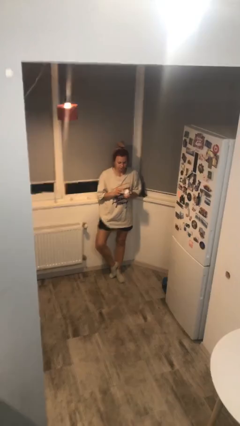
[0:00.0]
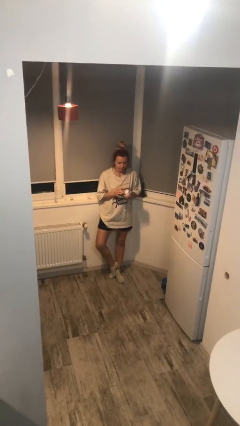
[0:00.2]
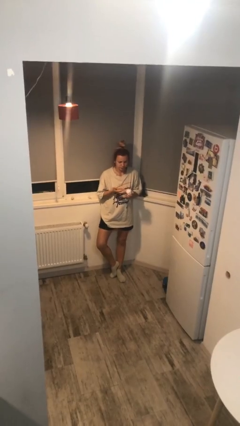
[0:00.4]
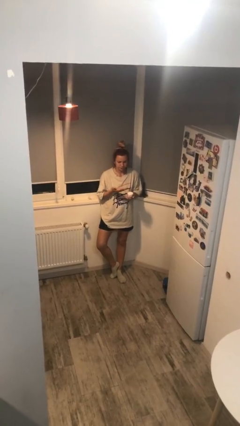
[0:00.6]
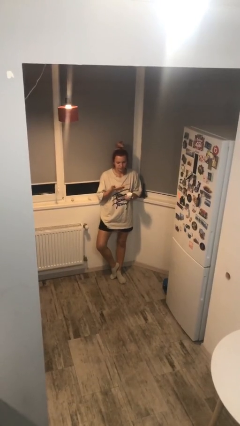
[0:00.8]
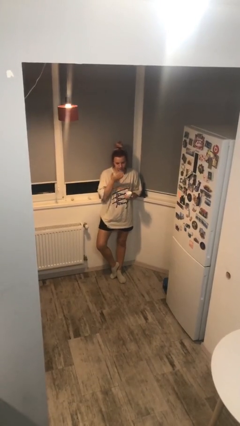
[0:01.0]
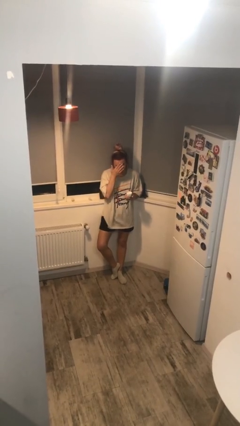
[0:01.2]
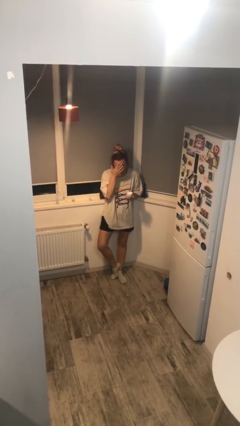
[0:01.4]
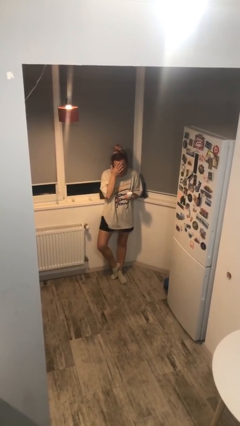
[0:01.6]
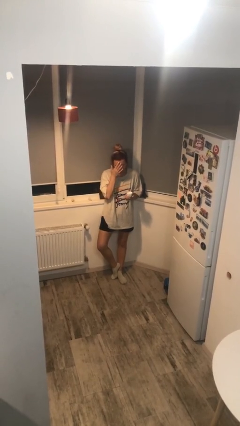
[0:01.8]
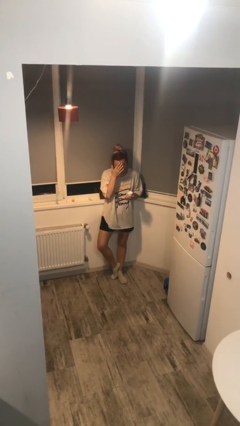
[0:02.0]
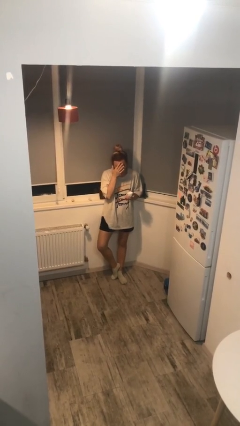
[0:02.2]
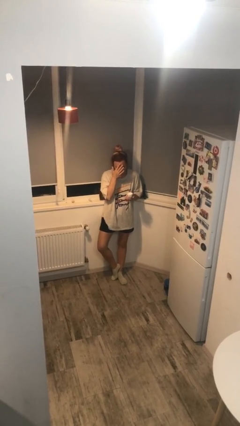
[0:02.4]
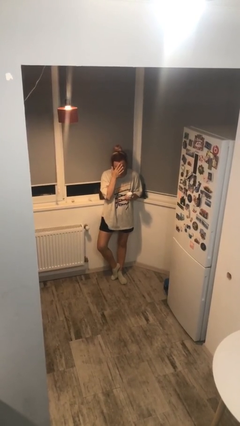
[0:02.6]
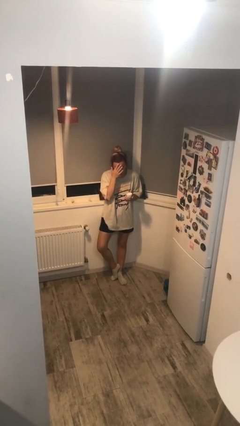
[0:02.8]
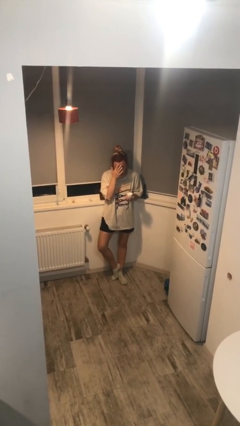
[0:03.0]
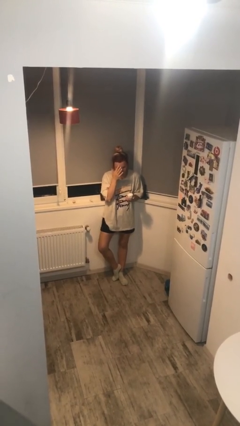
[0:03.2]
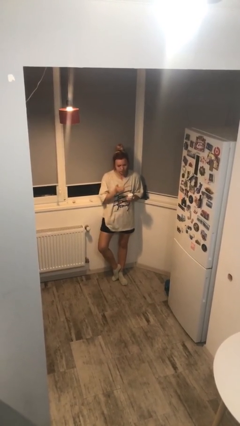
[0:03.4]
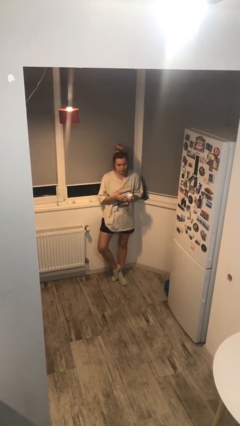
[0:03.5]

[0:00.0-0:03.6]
person applies facial moisturizer

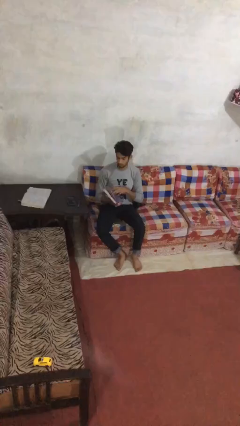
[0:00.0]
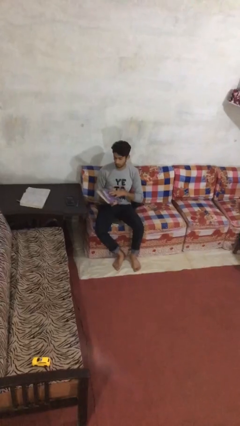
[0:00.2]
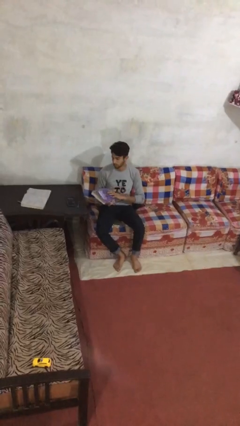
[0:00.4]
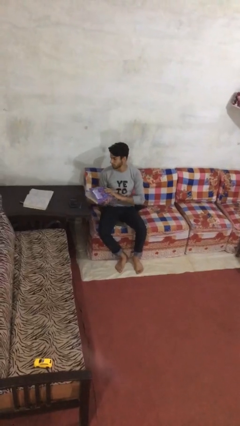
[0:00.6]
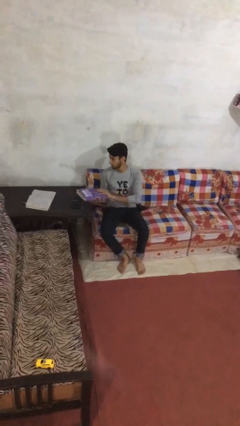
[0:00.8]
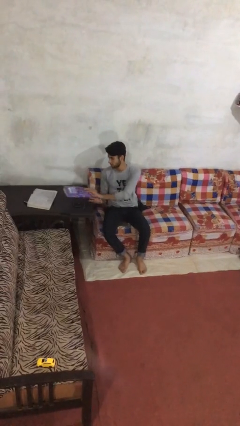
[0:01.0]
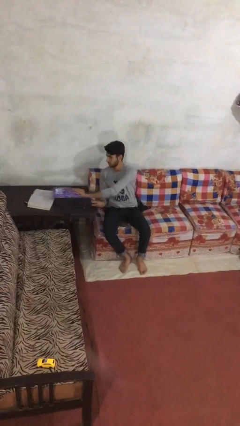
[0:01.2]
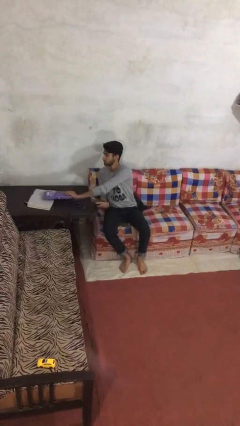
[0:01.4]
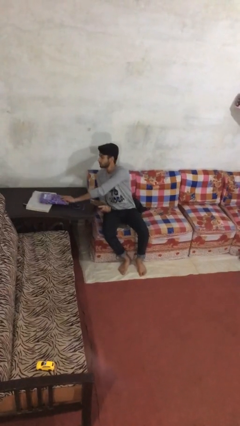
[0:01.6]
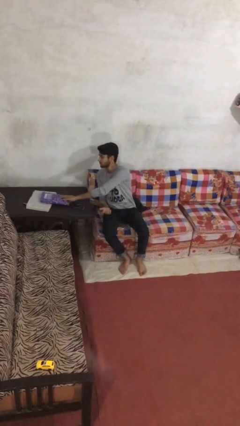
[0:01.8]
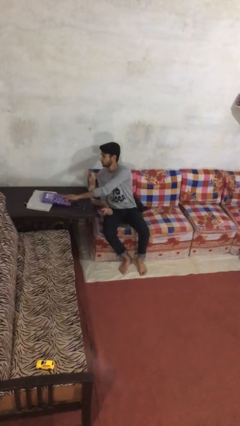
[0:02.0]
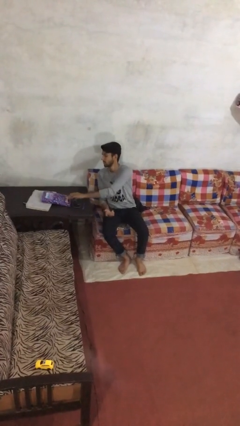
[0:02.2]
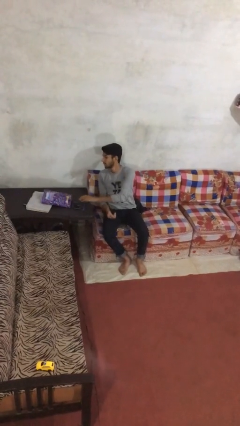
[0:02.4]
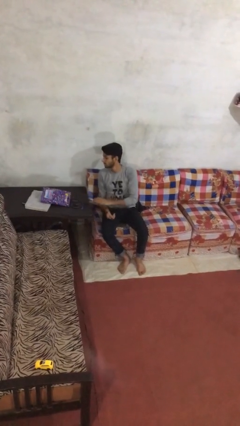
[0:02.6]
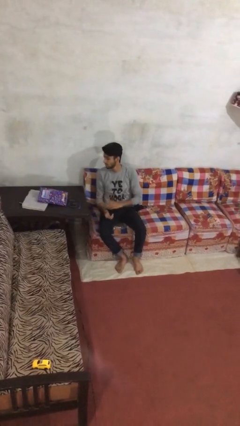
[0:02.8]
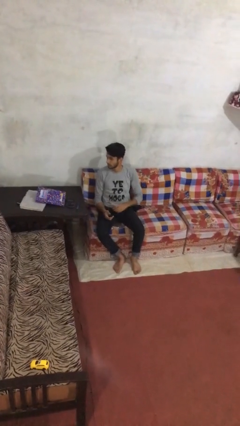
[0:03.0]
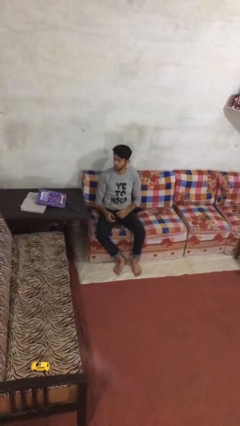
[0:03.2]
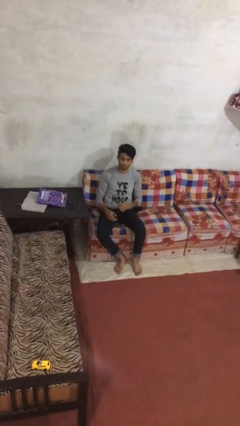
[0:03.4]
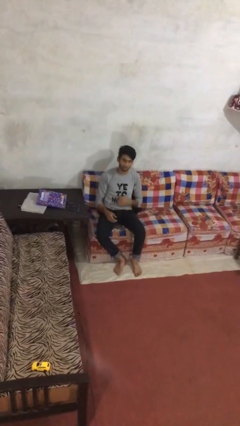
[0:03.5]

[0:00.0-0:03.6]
person puts down object on table

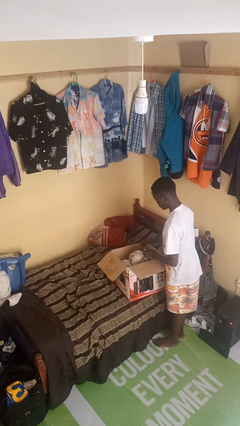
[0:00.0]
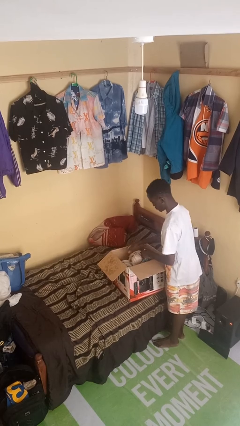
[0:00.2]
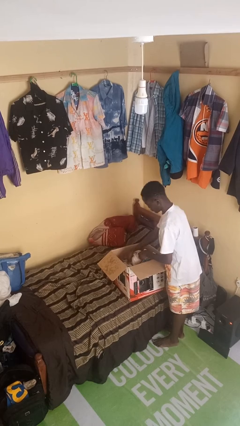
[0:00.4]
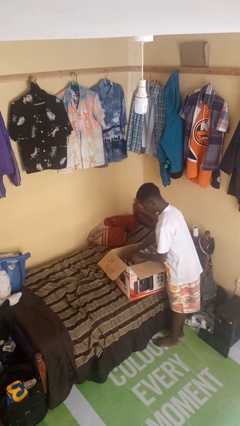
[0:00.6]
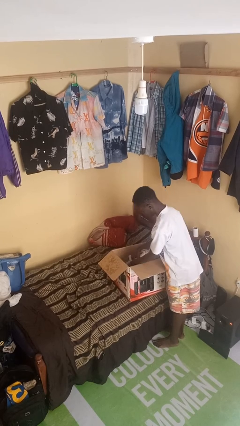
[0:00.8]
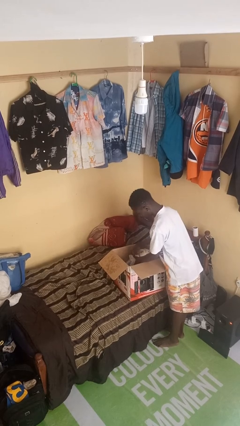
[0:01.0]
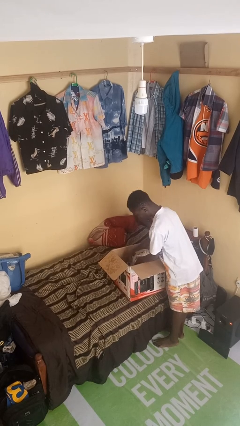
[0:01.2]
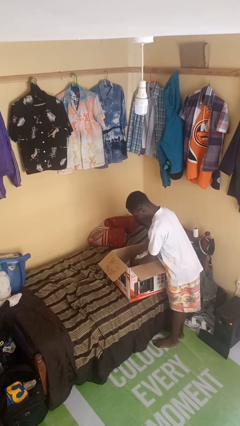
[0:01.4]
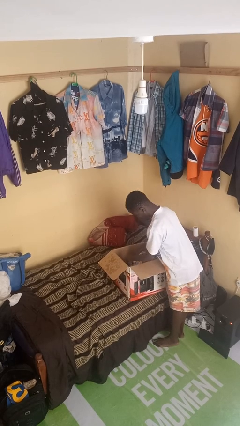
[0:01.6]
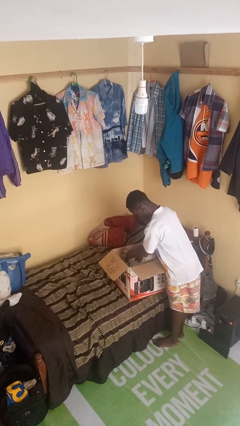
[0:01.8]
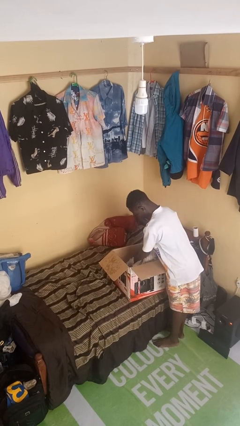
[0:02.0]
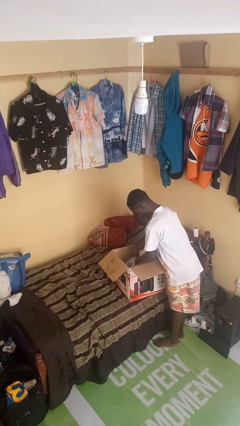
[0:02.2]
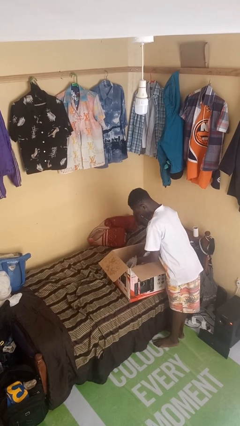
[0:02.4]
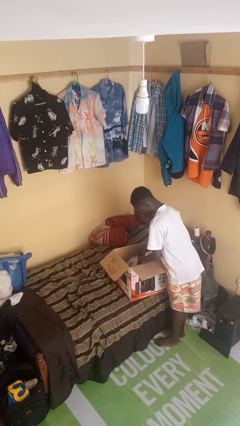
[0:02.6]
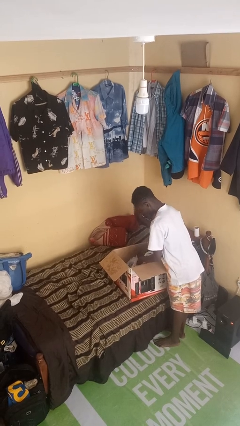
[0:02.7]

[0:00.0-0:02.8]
person searches in box

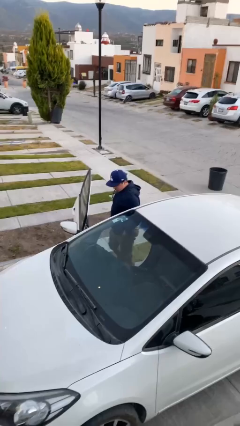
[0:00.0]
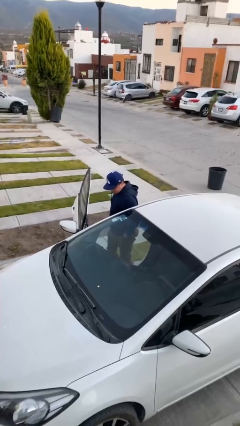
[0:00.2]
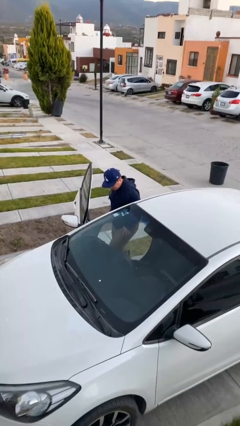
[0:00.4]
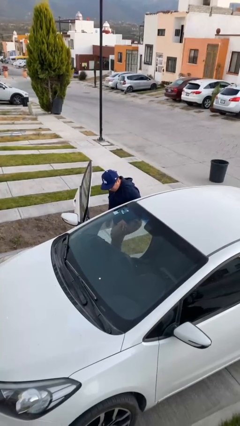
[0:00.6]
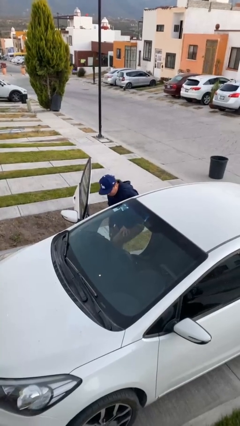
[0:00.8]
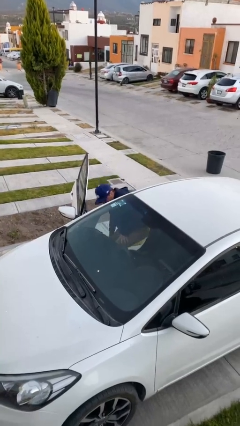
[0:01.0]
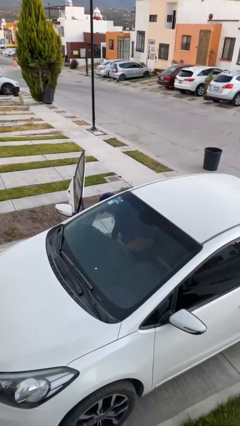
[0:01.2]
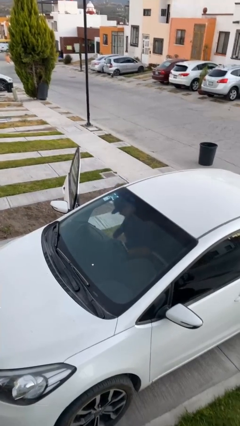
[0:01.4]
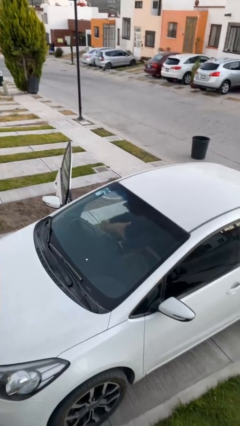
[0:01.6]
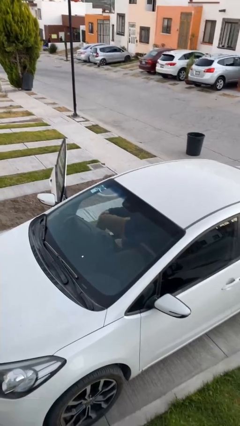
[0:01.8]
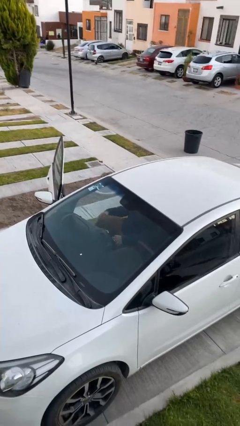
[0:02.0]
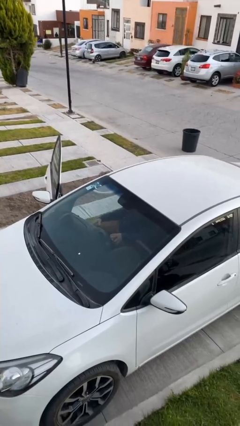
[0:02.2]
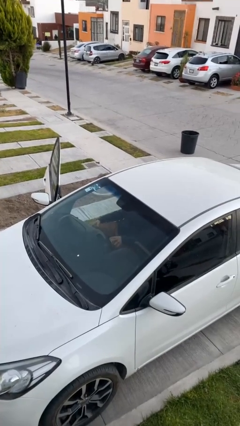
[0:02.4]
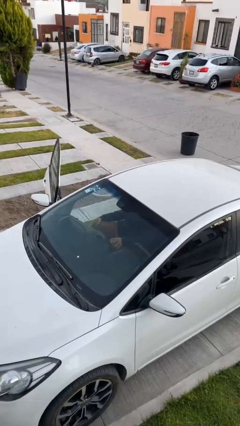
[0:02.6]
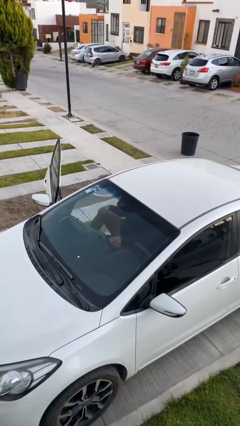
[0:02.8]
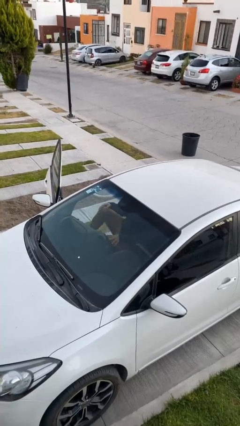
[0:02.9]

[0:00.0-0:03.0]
person enters car

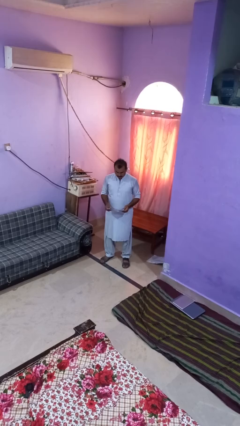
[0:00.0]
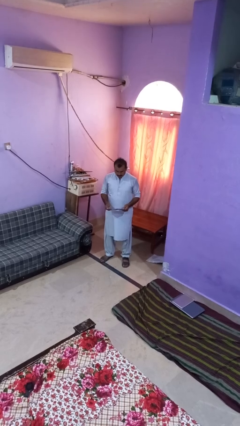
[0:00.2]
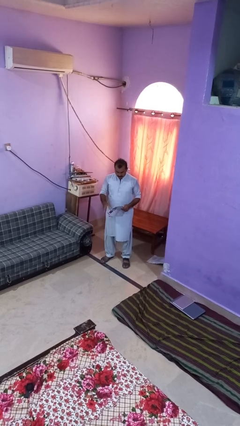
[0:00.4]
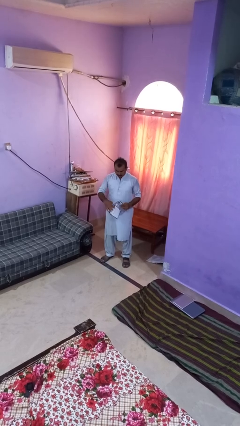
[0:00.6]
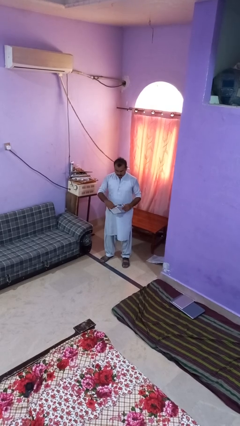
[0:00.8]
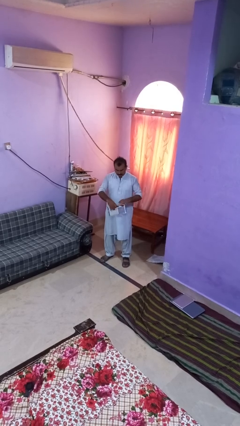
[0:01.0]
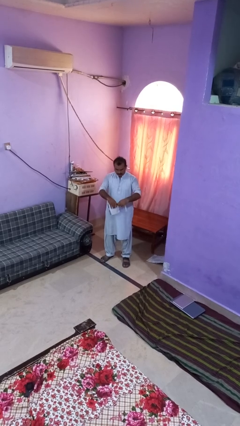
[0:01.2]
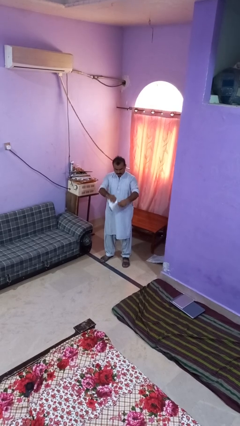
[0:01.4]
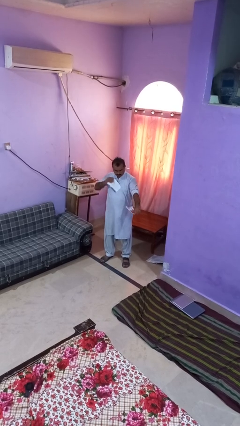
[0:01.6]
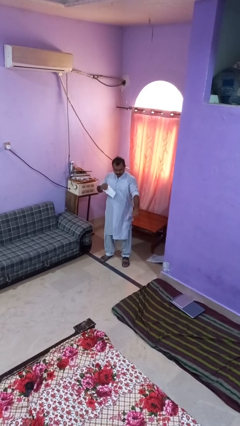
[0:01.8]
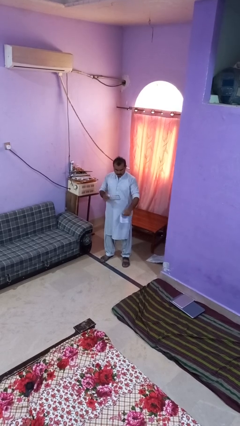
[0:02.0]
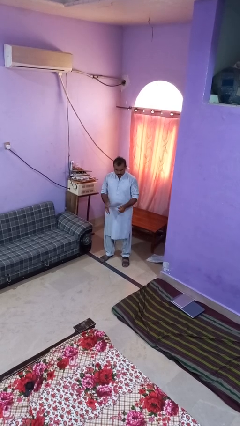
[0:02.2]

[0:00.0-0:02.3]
person tears paper

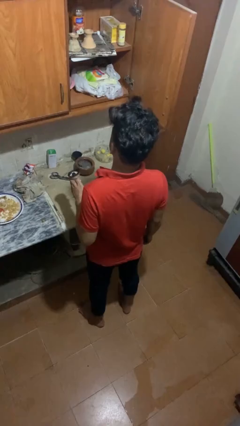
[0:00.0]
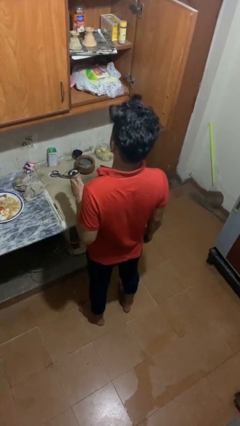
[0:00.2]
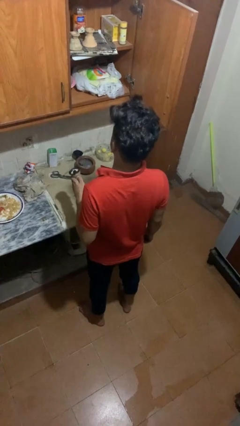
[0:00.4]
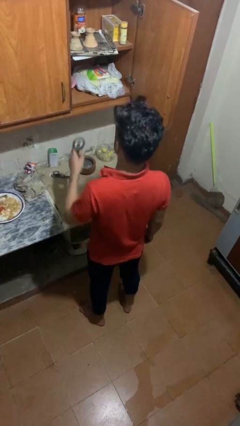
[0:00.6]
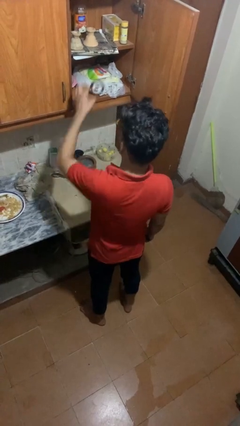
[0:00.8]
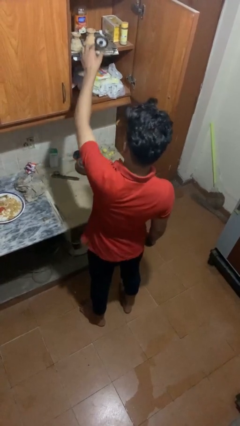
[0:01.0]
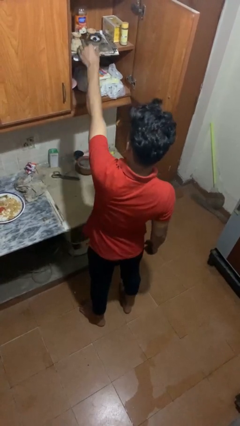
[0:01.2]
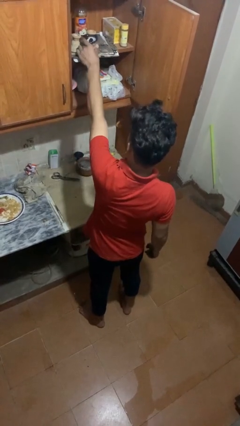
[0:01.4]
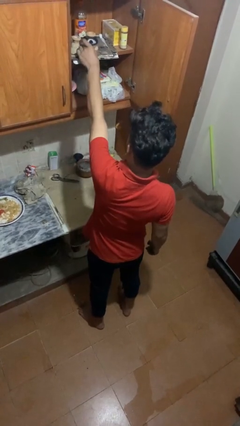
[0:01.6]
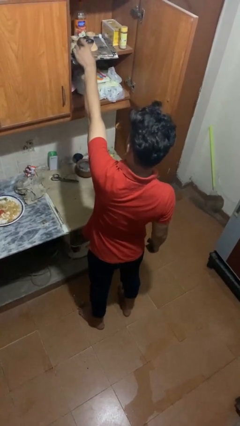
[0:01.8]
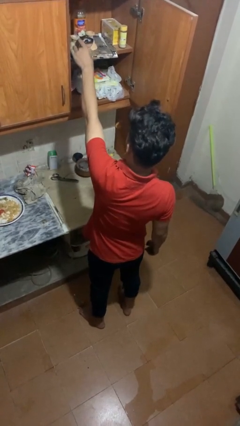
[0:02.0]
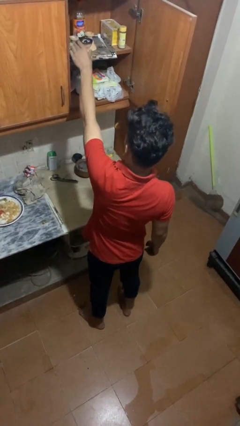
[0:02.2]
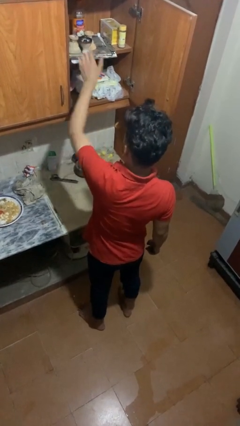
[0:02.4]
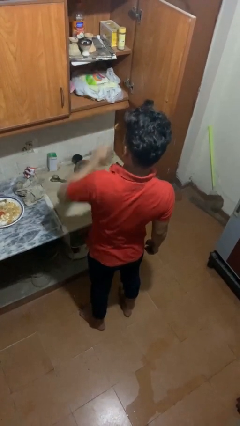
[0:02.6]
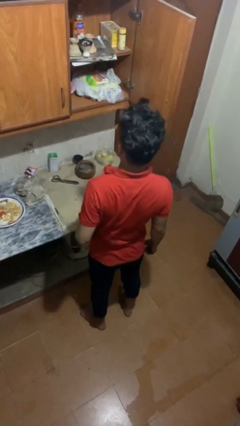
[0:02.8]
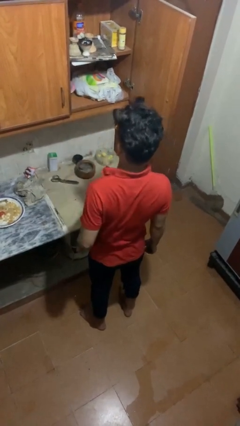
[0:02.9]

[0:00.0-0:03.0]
person puts object in cabinet
